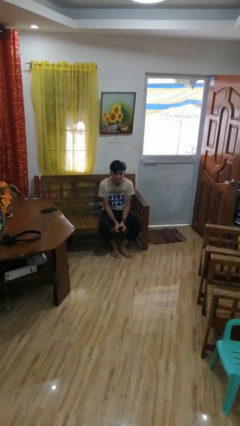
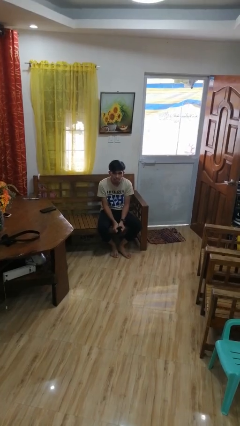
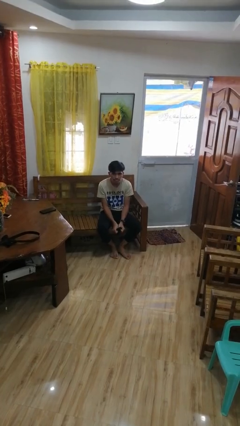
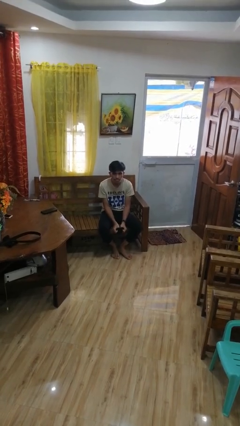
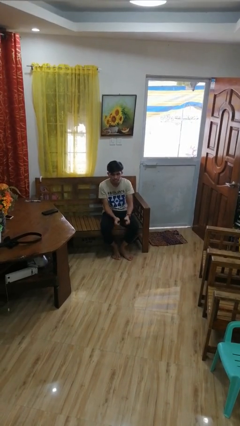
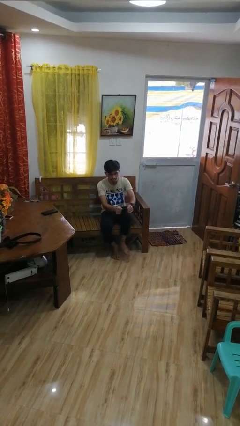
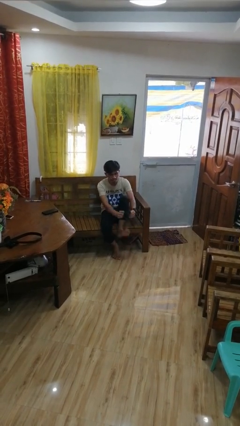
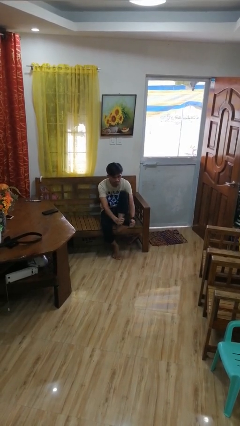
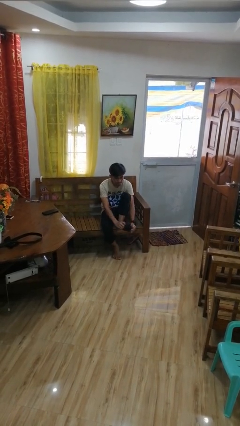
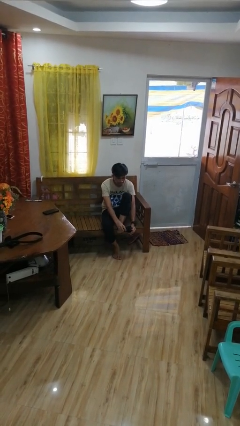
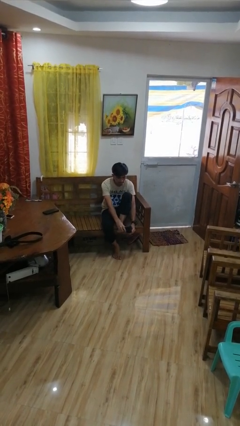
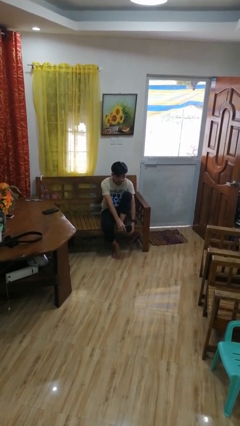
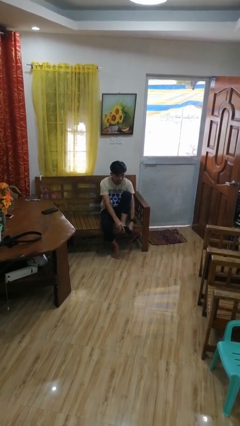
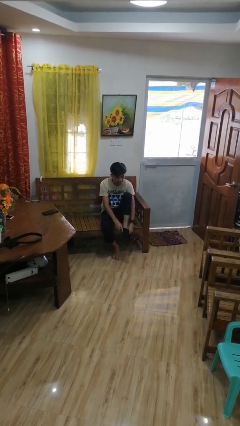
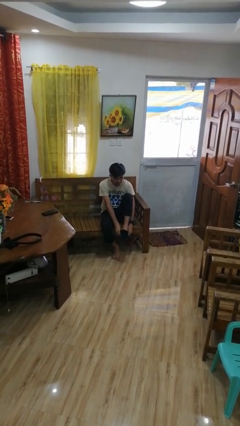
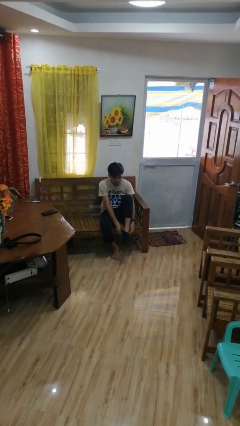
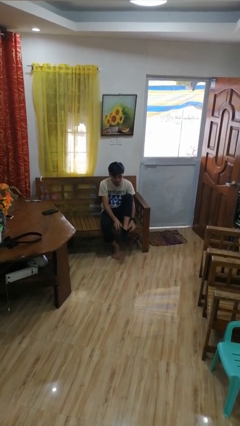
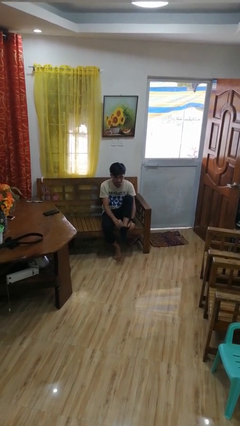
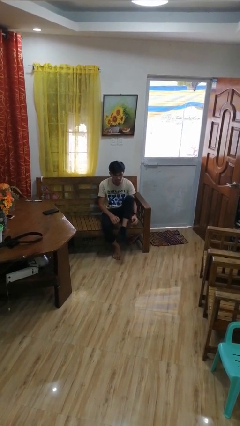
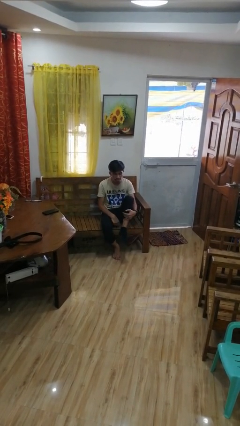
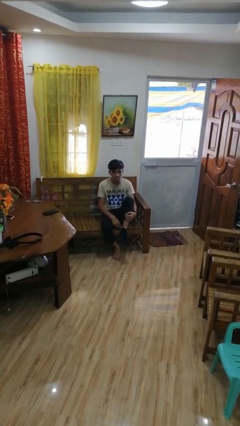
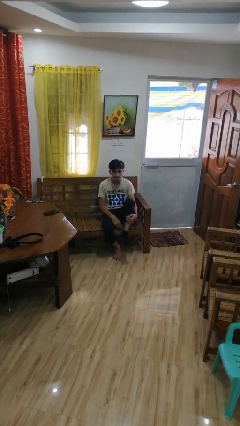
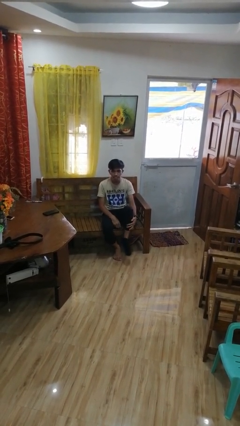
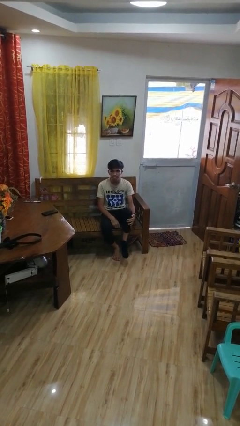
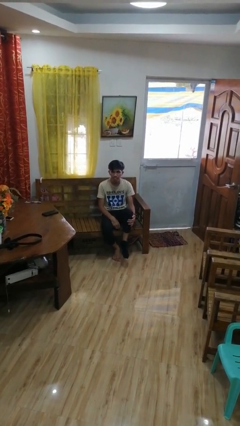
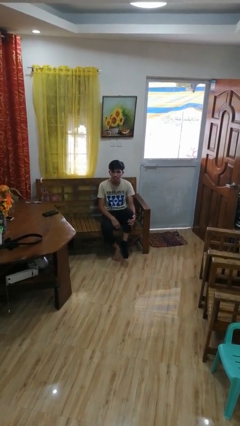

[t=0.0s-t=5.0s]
person puts on socks

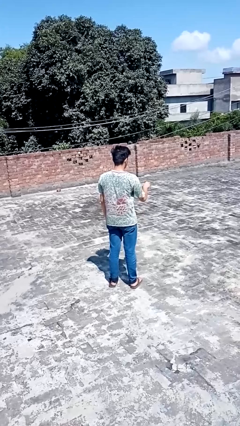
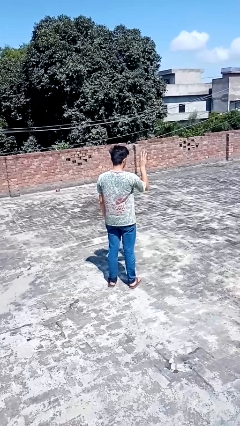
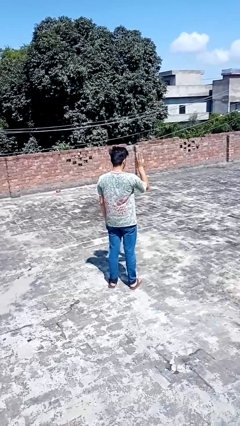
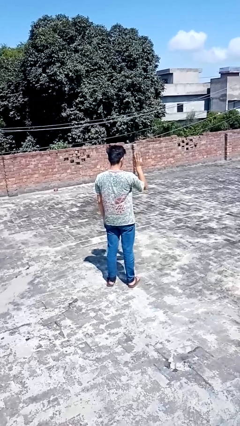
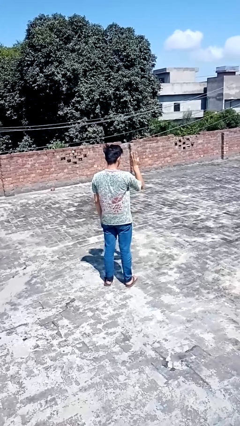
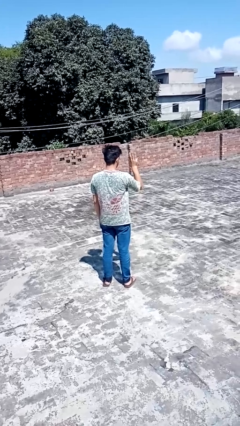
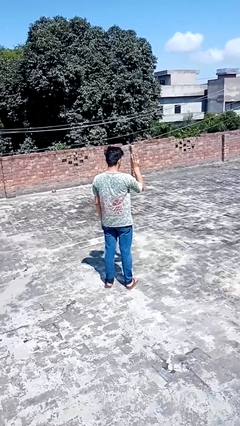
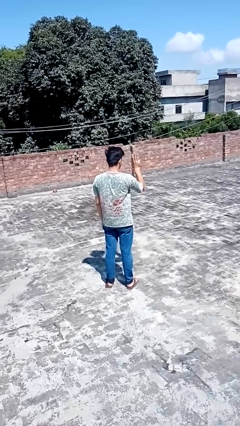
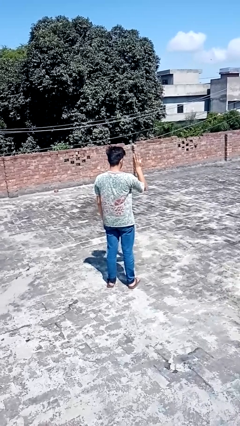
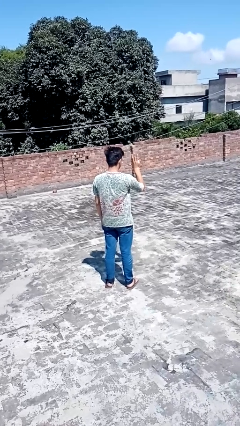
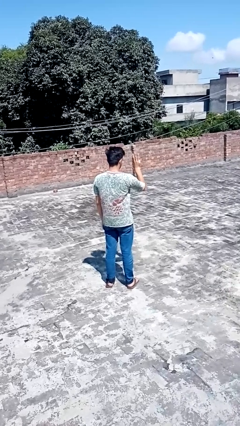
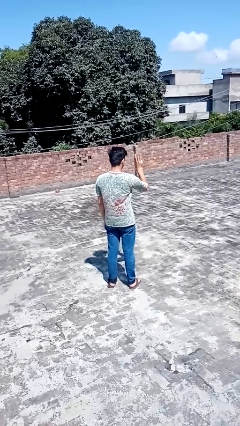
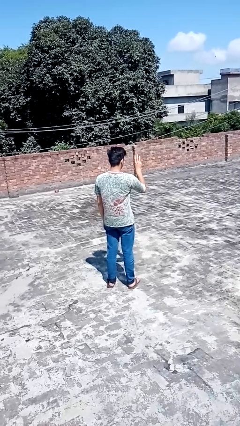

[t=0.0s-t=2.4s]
person gestures number three

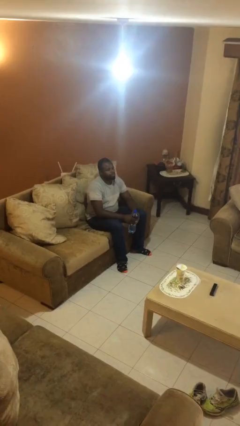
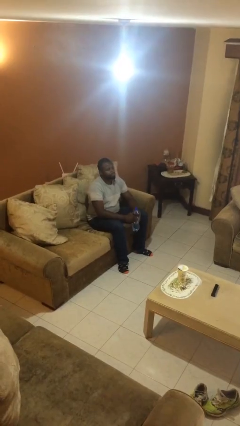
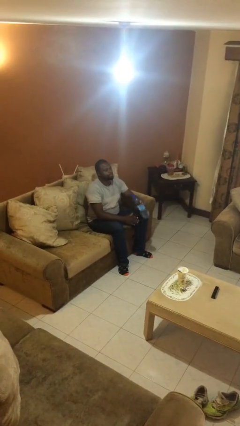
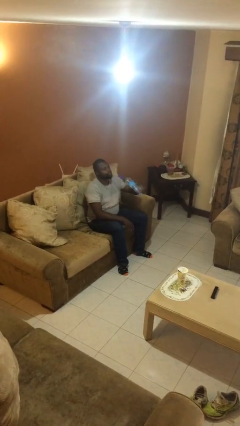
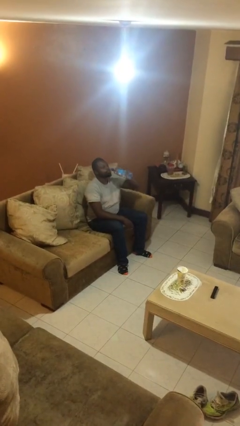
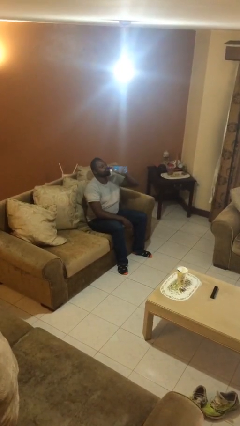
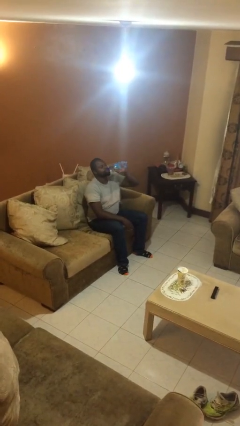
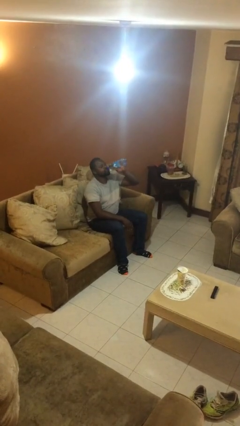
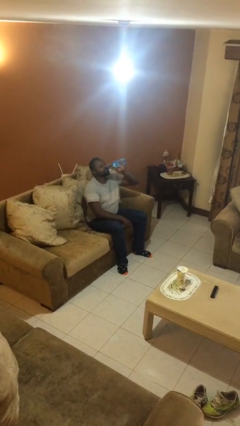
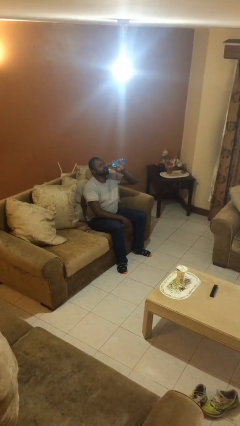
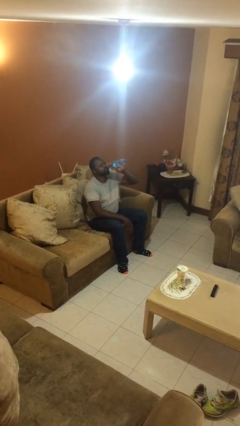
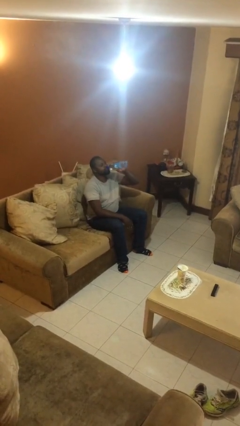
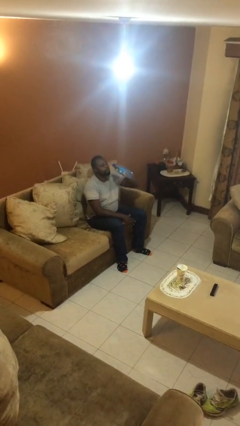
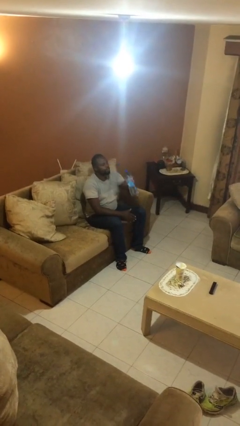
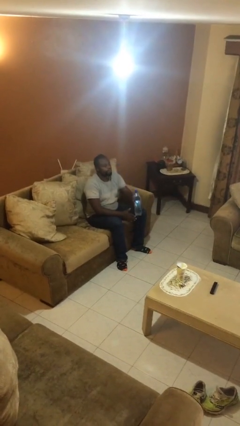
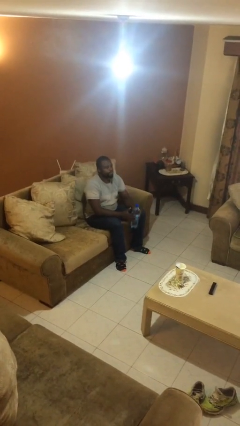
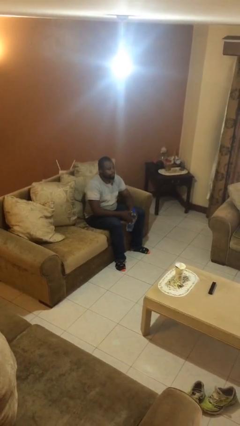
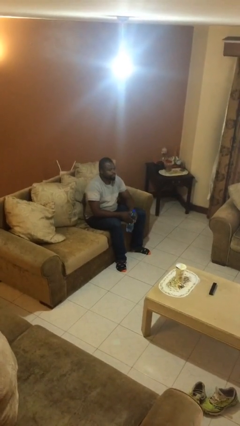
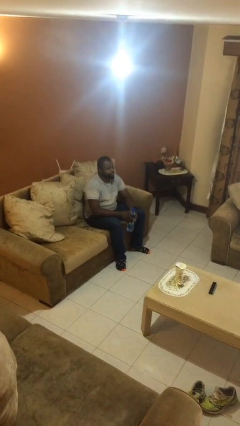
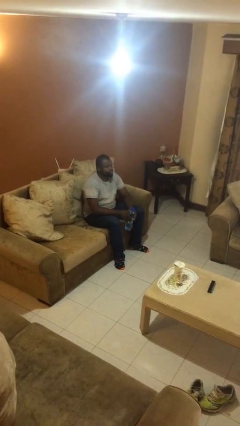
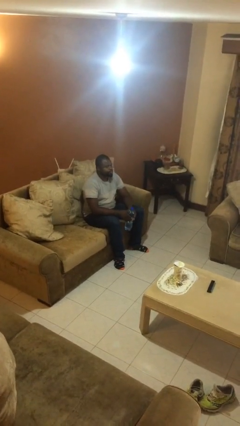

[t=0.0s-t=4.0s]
person drinks from bottle

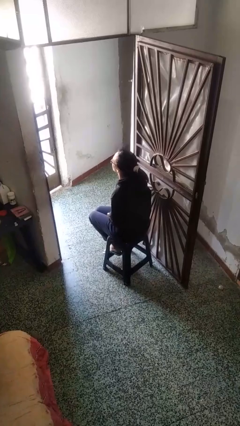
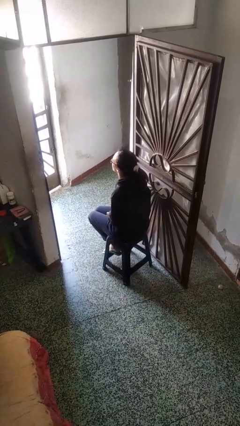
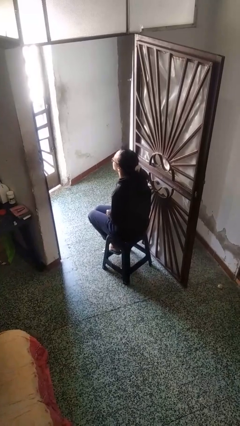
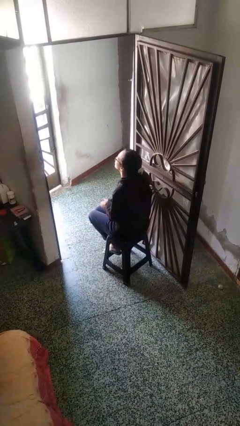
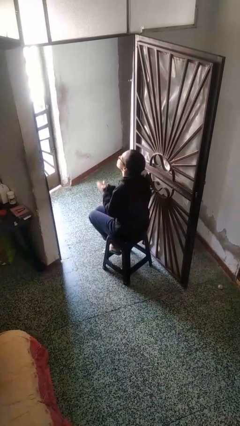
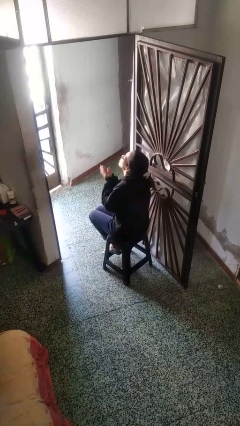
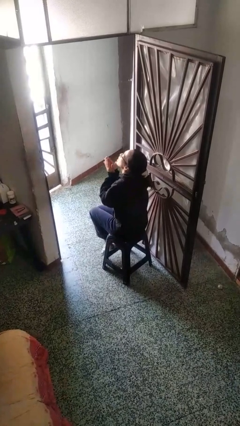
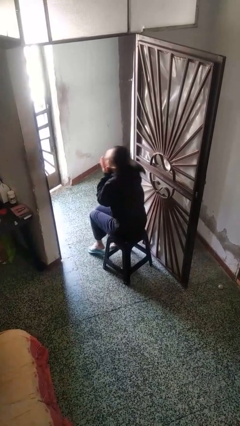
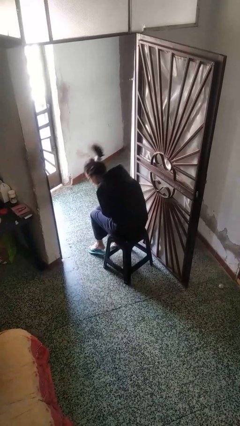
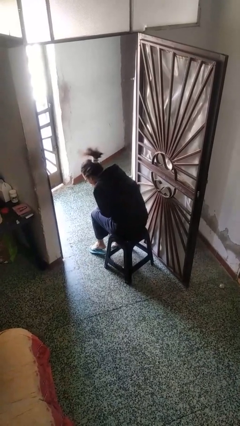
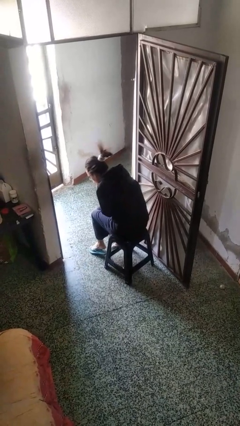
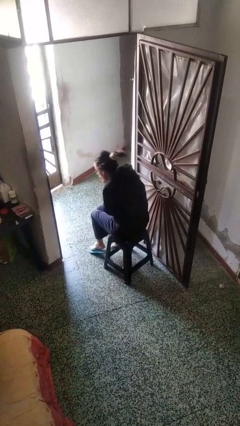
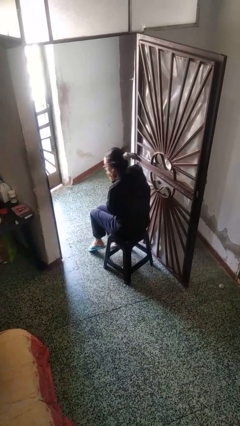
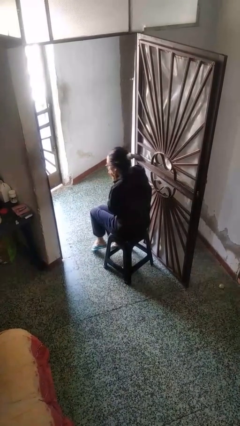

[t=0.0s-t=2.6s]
person sneezes into hand

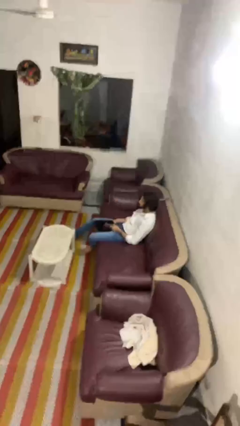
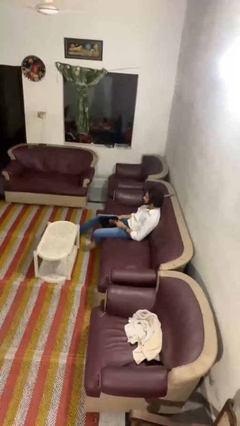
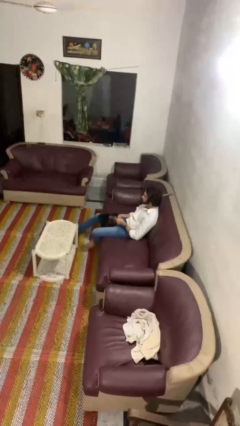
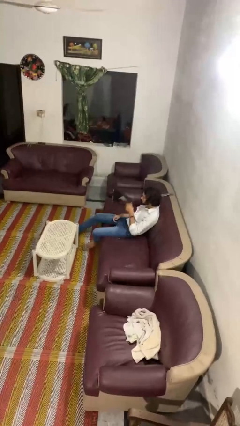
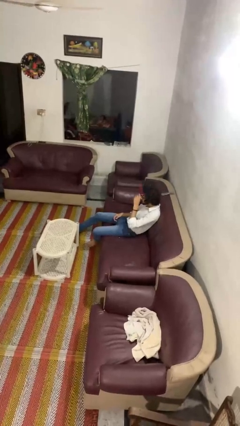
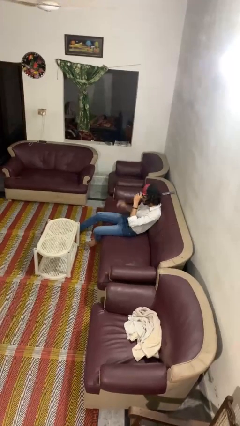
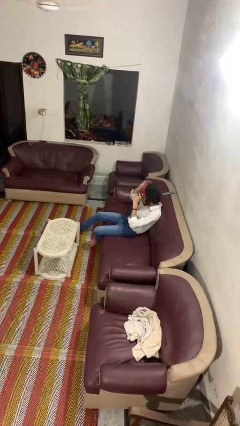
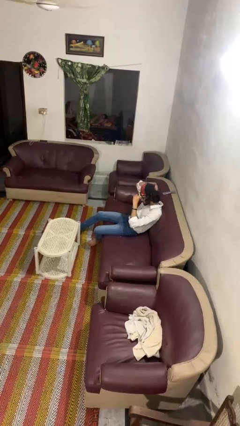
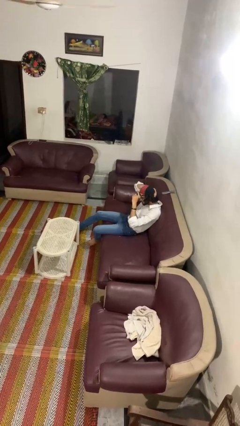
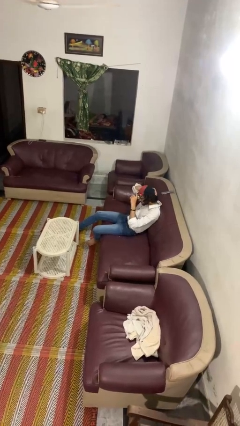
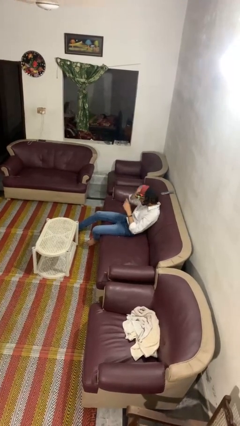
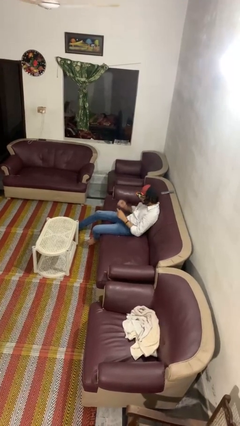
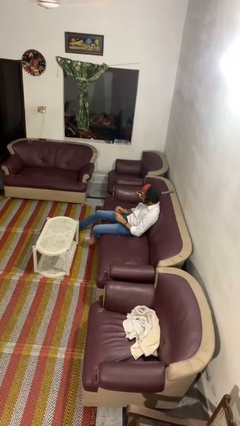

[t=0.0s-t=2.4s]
person puts on hat

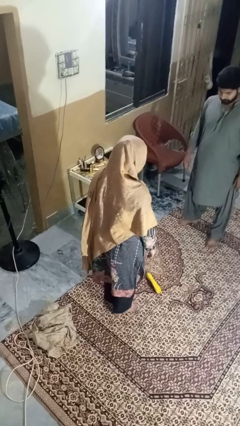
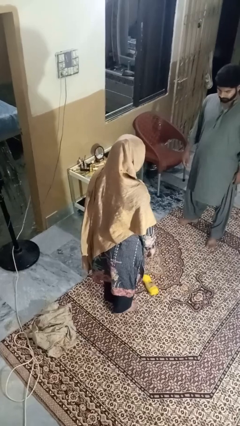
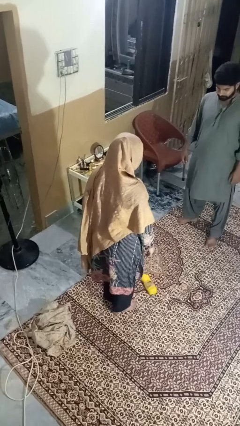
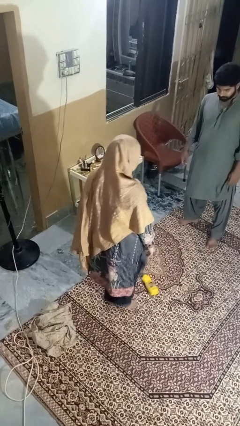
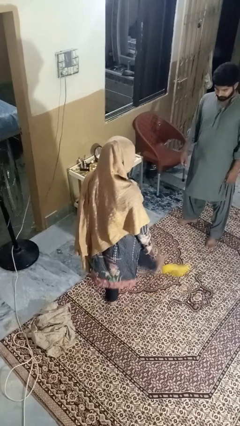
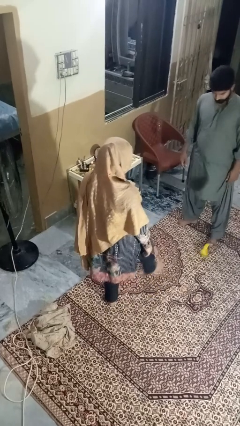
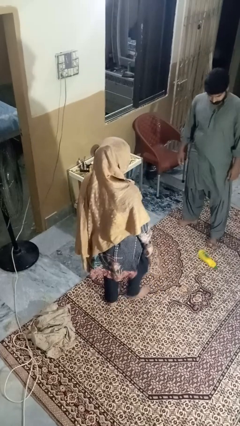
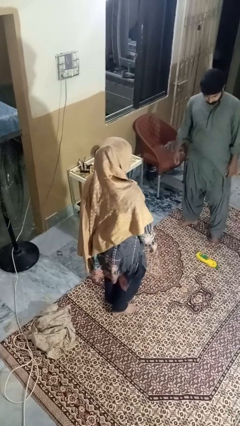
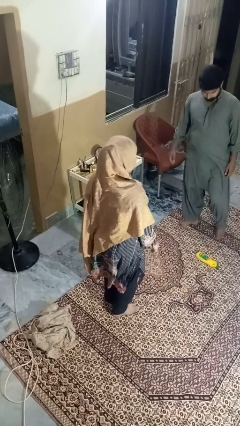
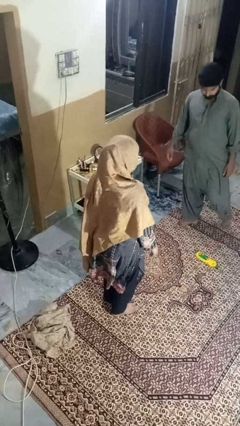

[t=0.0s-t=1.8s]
person kicks object to person
